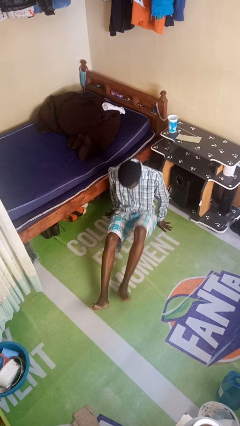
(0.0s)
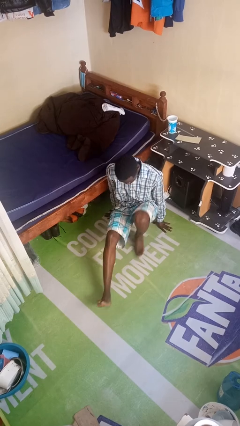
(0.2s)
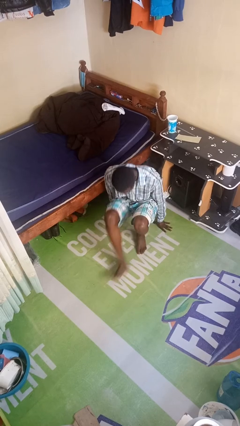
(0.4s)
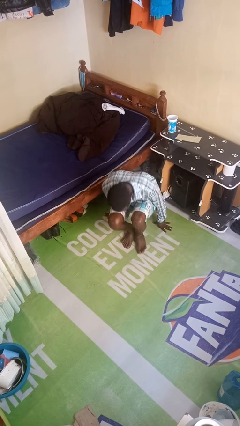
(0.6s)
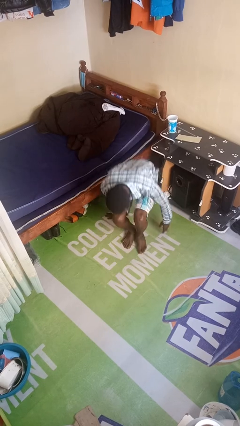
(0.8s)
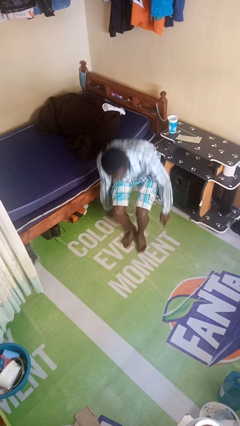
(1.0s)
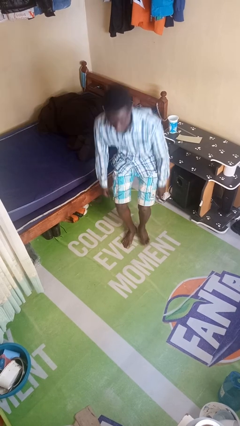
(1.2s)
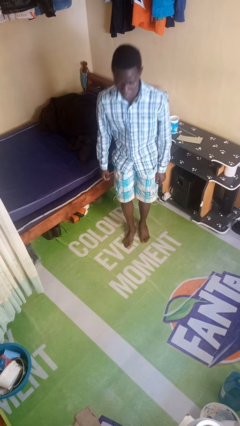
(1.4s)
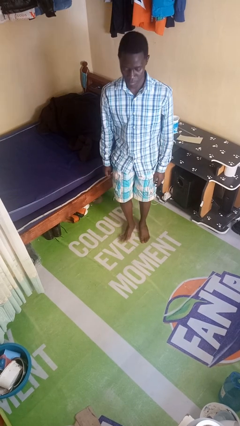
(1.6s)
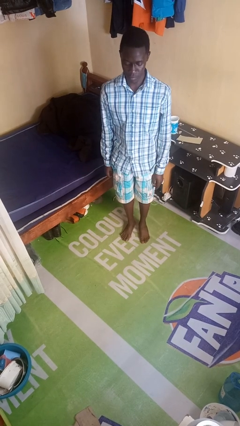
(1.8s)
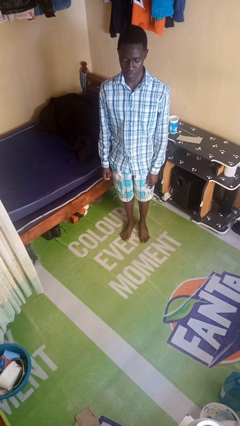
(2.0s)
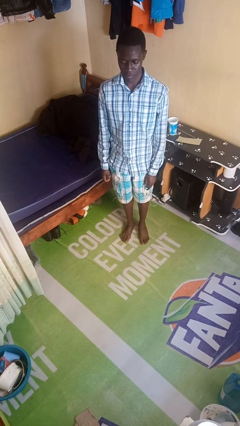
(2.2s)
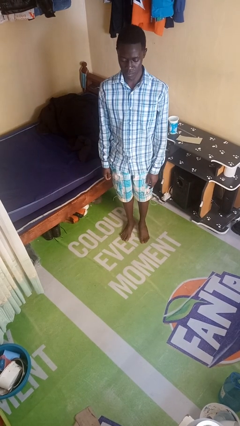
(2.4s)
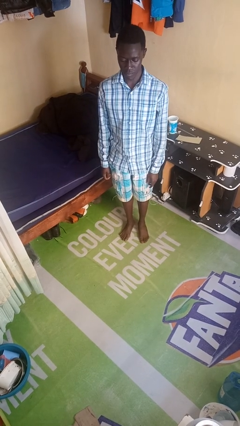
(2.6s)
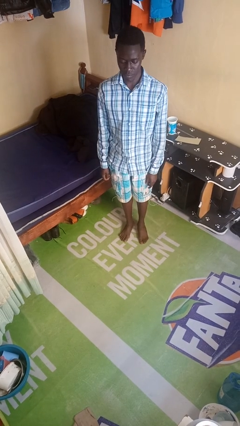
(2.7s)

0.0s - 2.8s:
person stands up from floor

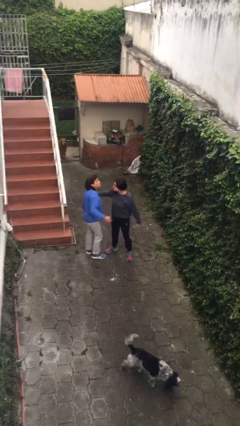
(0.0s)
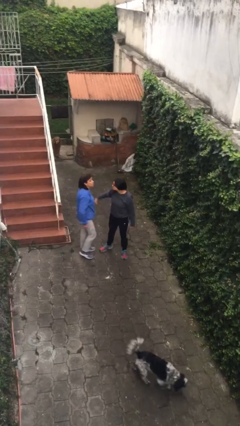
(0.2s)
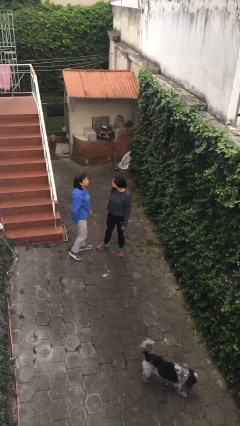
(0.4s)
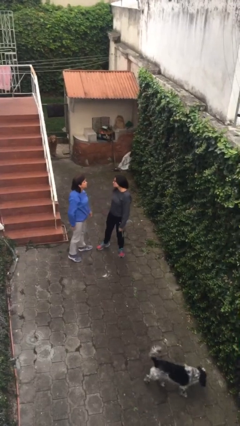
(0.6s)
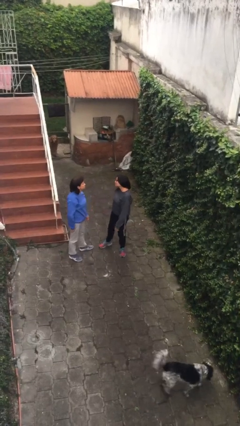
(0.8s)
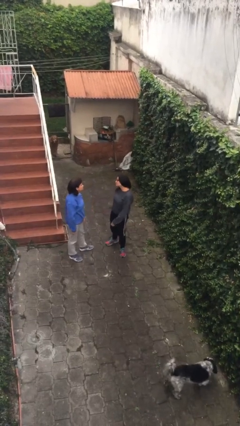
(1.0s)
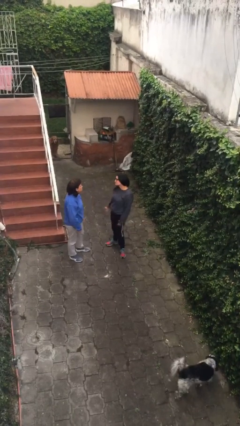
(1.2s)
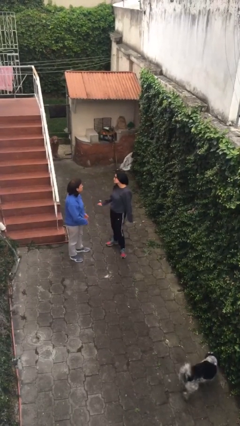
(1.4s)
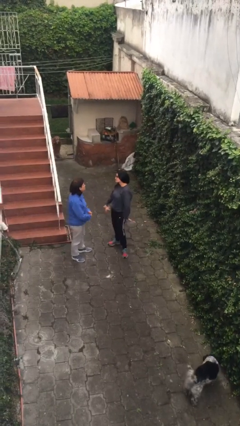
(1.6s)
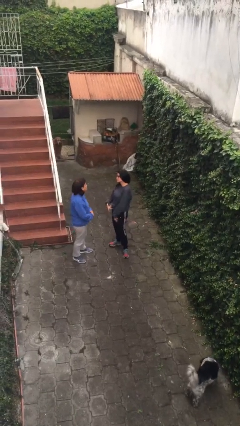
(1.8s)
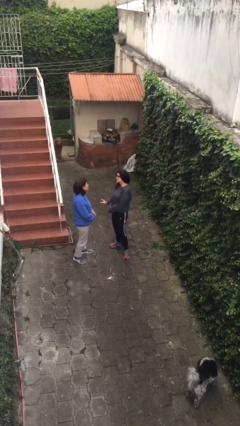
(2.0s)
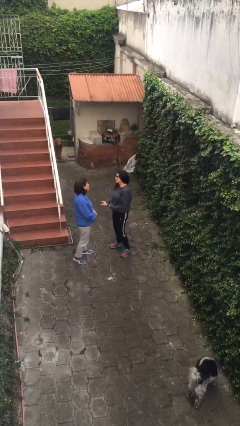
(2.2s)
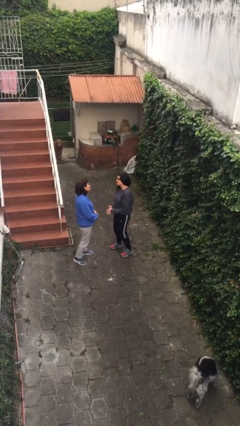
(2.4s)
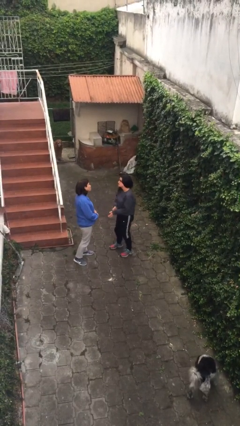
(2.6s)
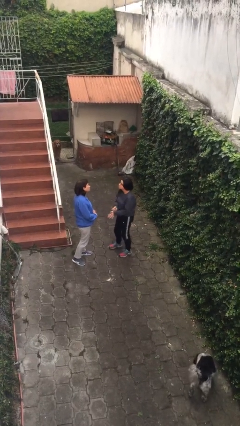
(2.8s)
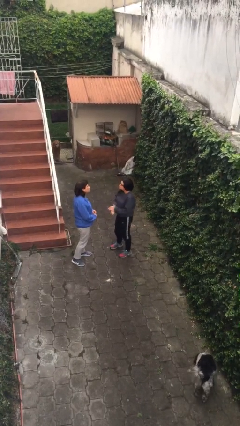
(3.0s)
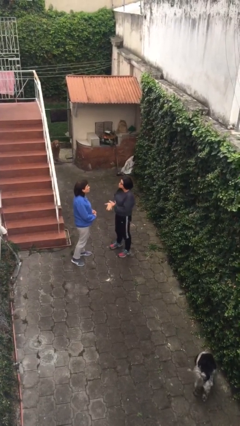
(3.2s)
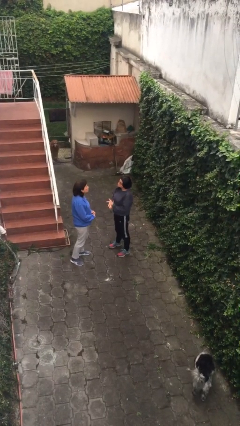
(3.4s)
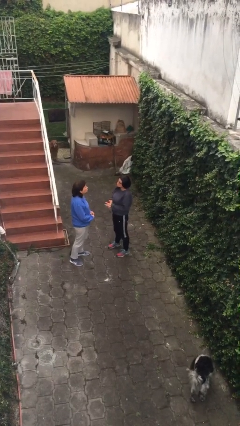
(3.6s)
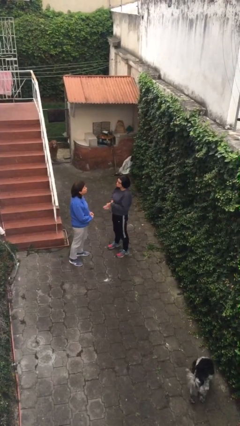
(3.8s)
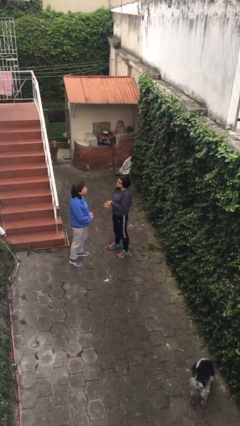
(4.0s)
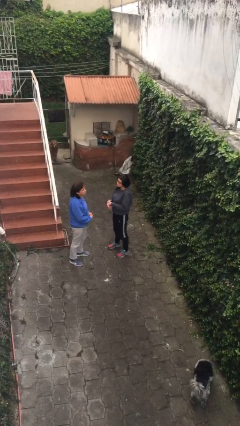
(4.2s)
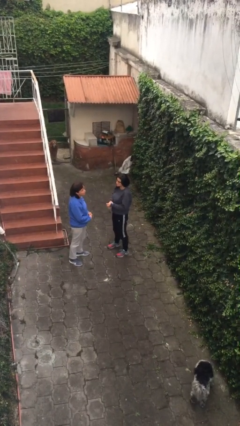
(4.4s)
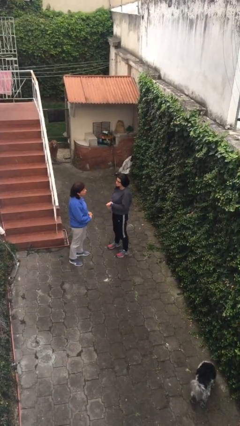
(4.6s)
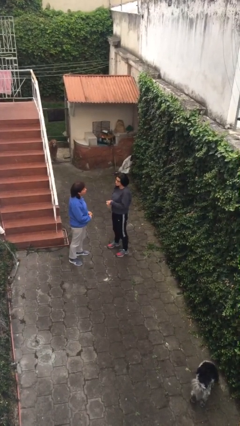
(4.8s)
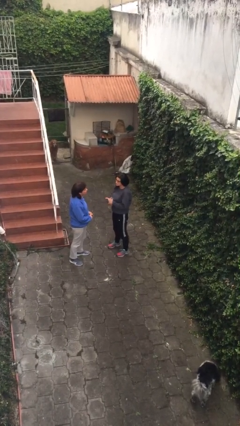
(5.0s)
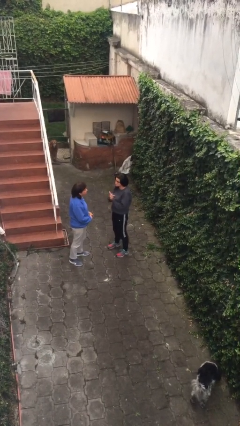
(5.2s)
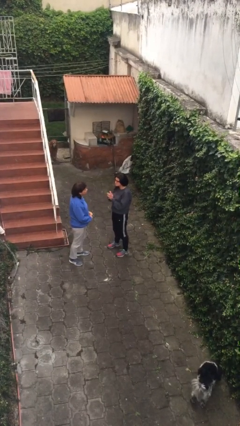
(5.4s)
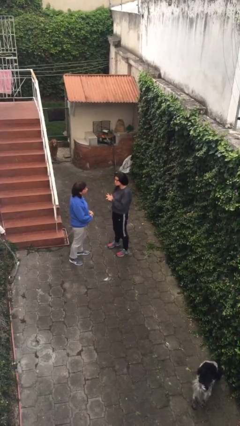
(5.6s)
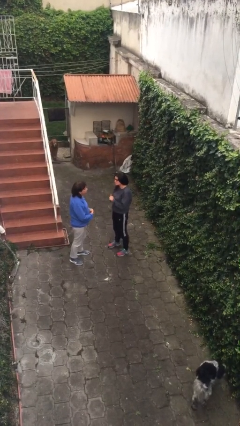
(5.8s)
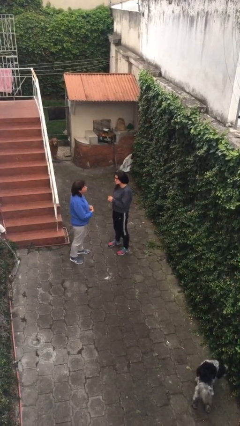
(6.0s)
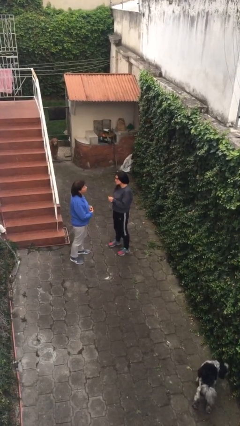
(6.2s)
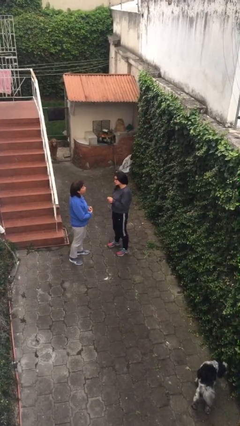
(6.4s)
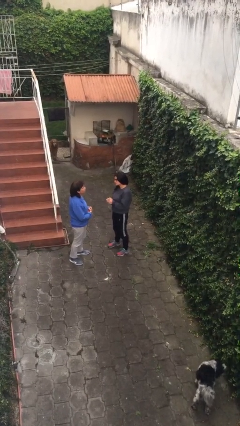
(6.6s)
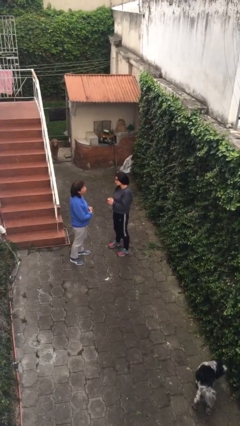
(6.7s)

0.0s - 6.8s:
person talks to person

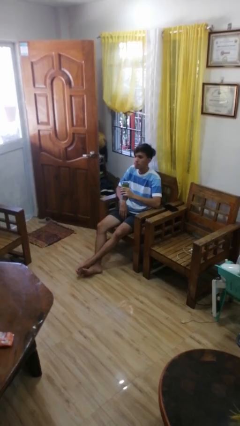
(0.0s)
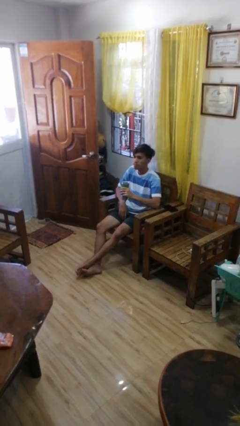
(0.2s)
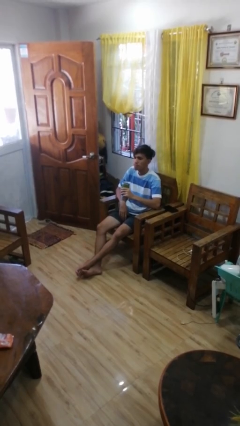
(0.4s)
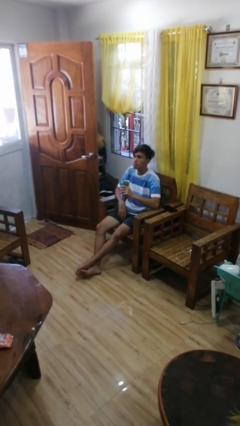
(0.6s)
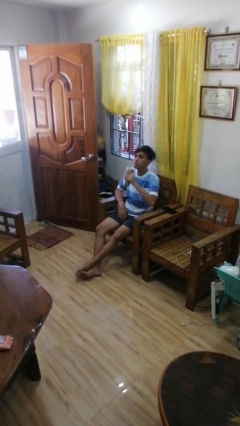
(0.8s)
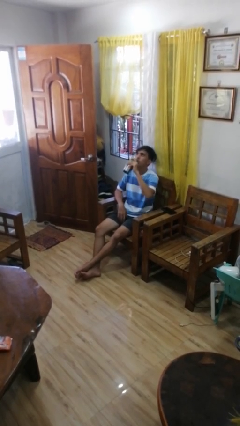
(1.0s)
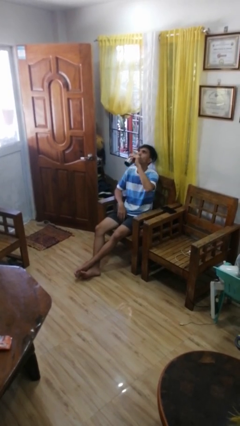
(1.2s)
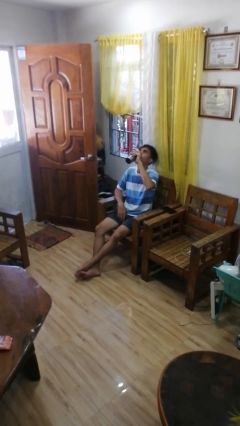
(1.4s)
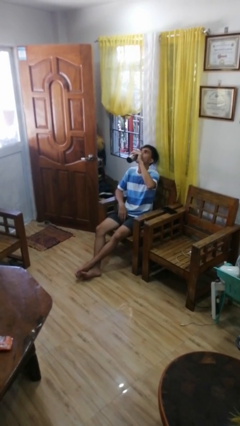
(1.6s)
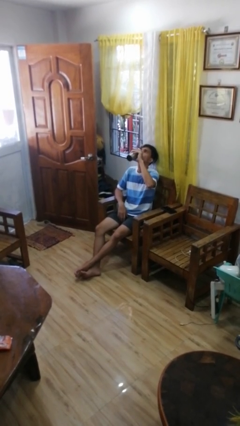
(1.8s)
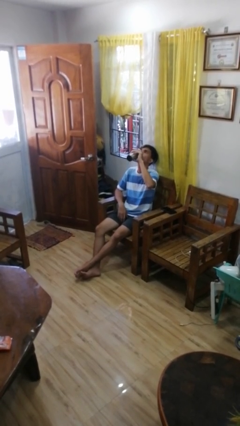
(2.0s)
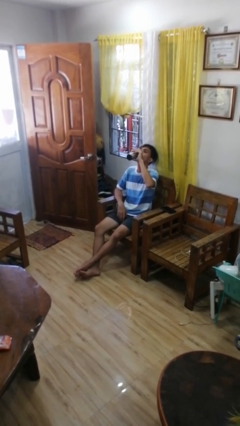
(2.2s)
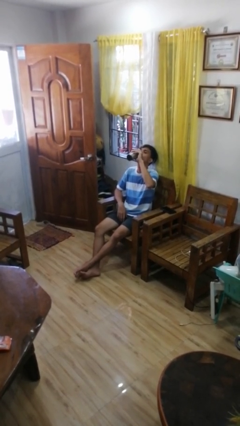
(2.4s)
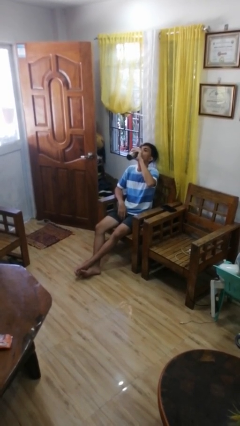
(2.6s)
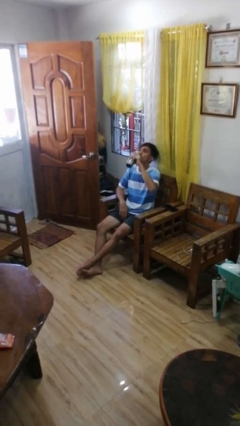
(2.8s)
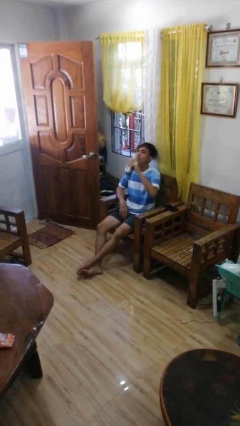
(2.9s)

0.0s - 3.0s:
person drinks from bottle

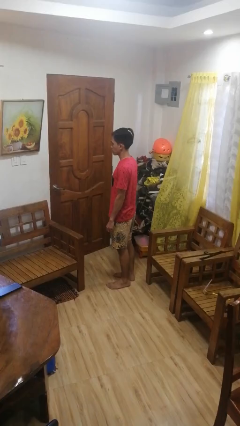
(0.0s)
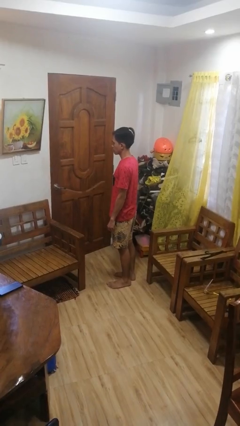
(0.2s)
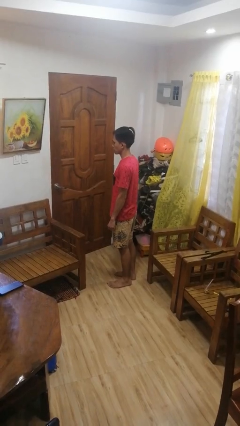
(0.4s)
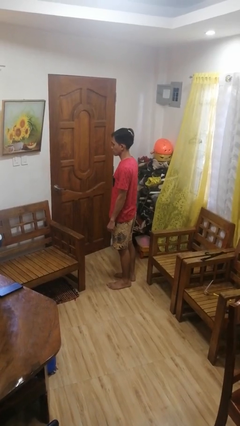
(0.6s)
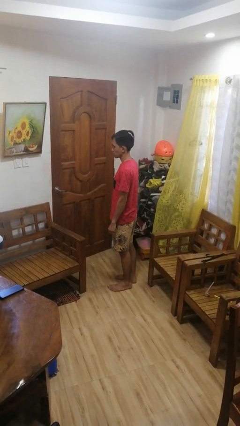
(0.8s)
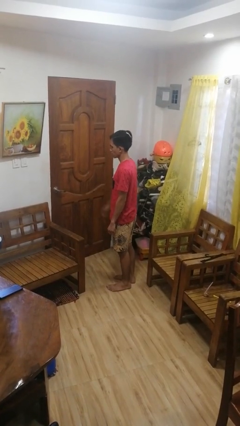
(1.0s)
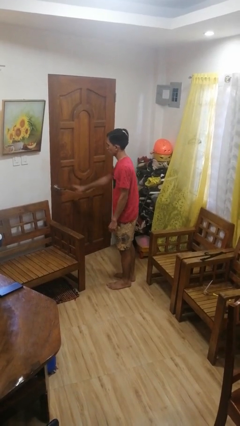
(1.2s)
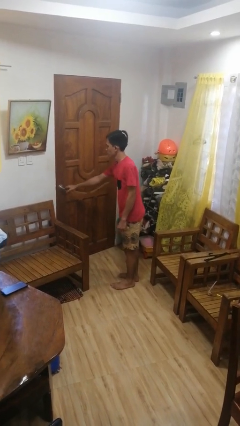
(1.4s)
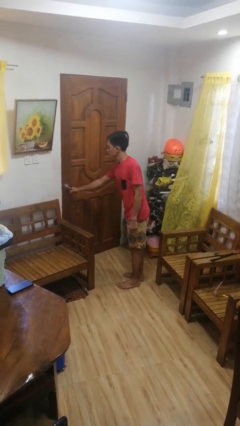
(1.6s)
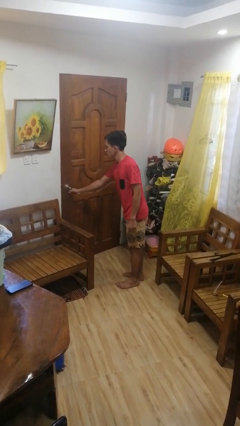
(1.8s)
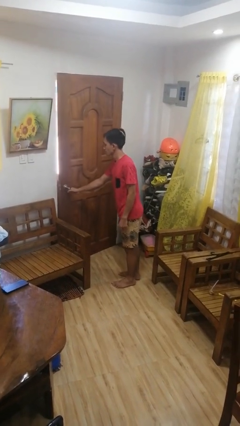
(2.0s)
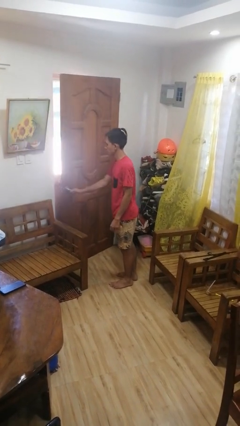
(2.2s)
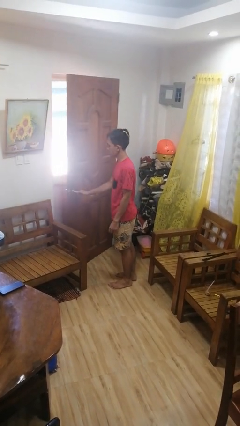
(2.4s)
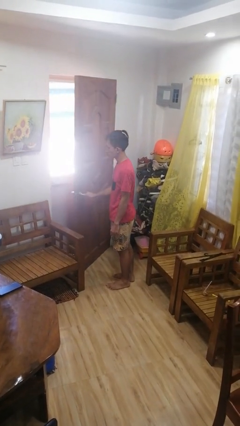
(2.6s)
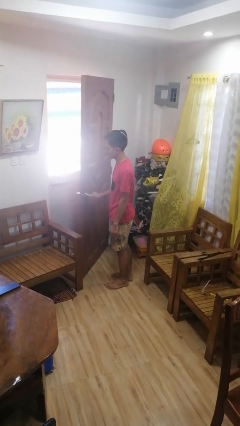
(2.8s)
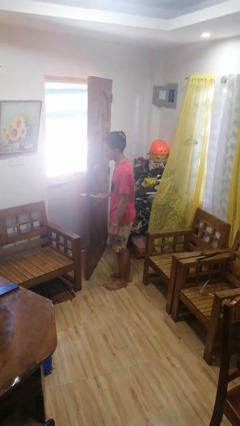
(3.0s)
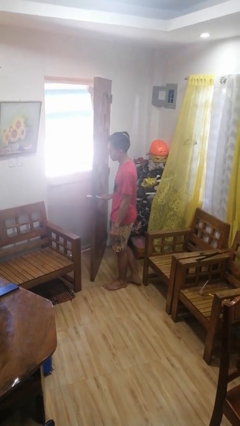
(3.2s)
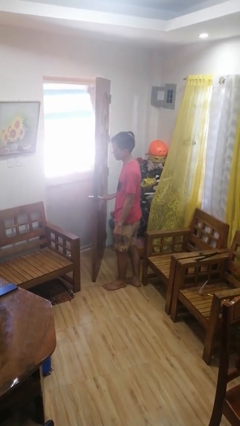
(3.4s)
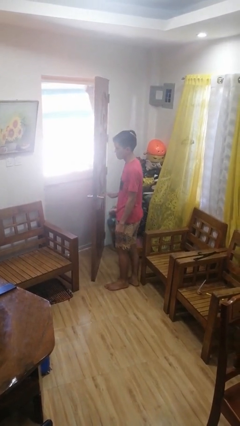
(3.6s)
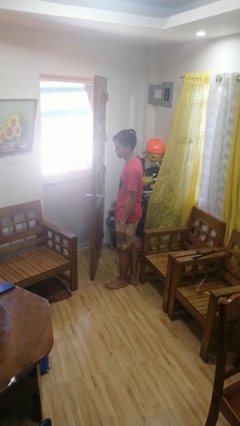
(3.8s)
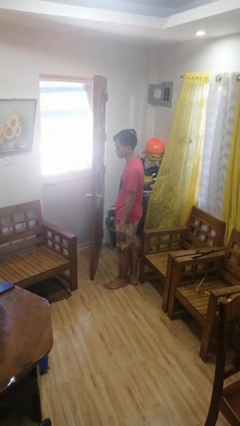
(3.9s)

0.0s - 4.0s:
person opens facility door

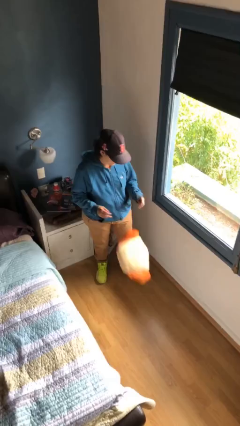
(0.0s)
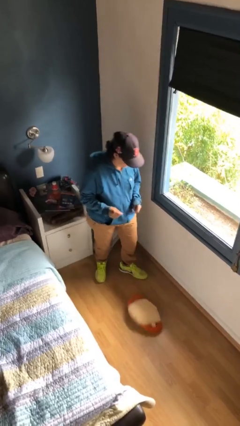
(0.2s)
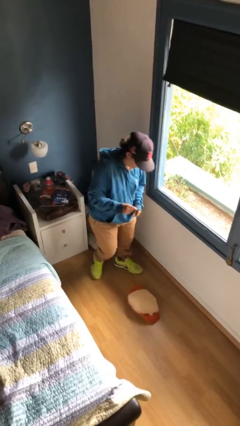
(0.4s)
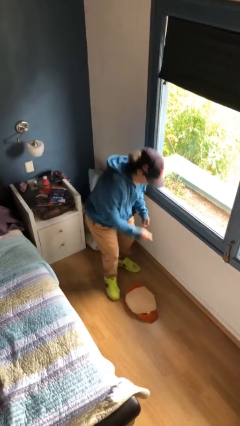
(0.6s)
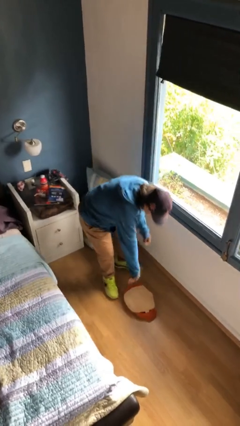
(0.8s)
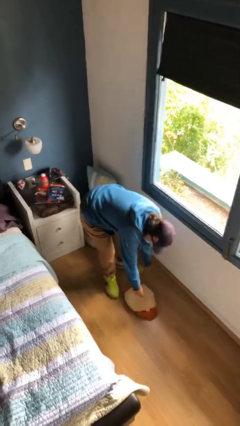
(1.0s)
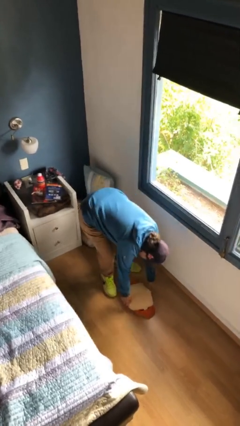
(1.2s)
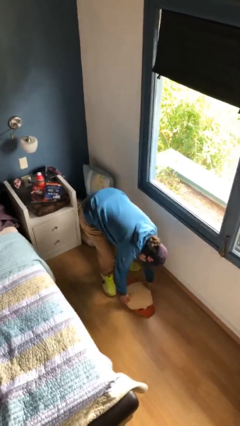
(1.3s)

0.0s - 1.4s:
person drops object
